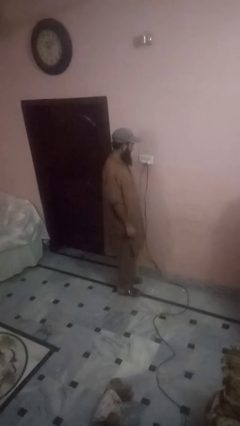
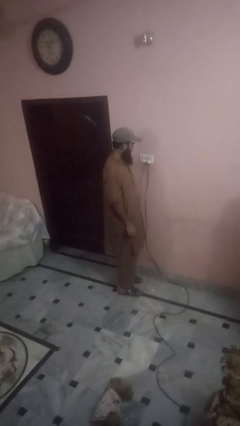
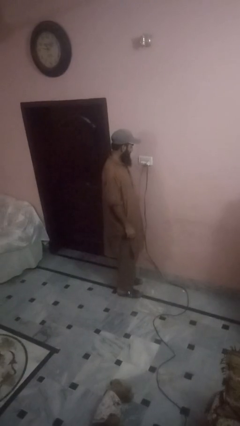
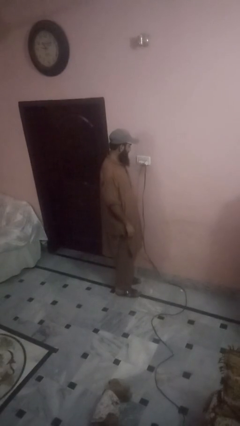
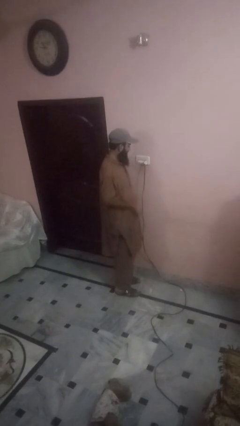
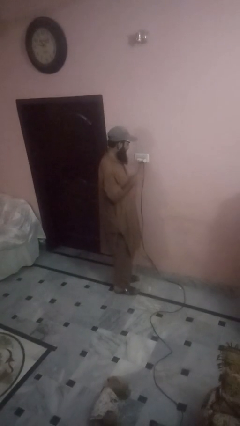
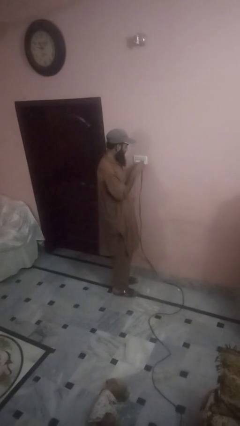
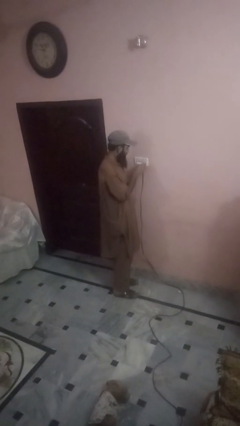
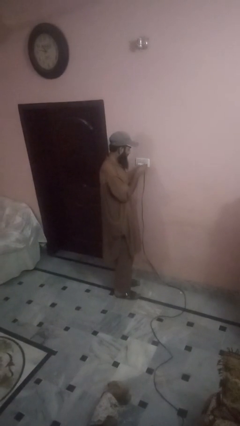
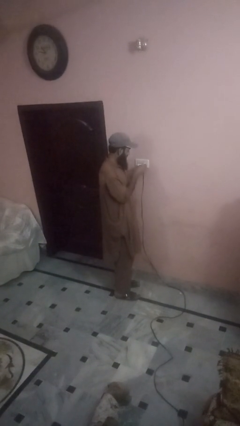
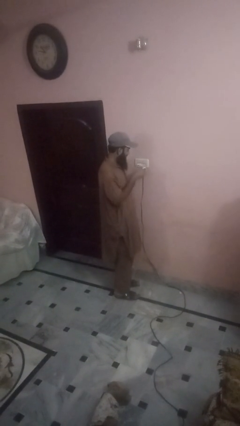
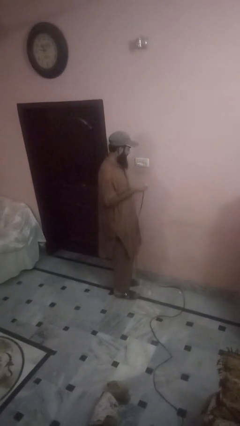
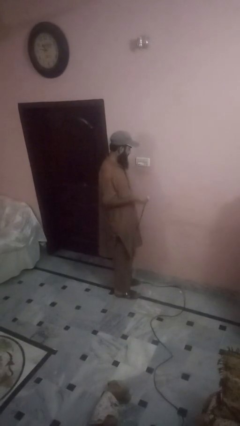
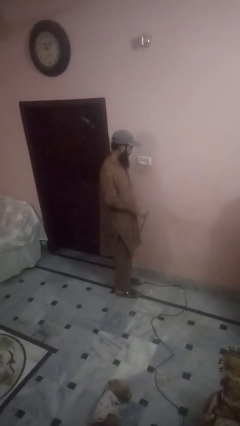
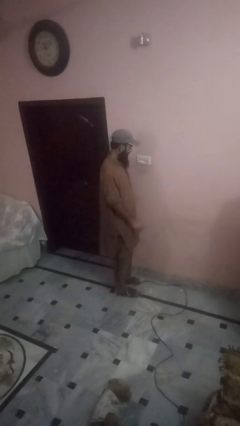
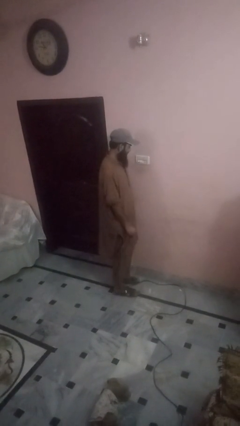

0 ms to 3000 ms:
person unplugs from electrical socket

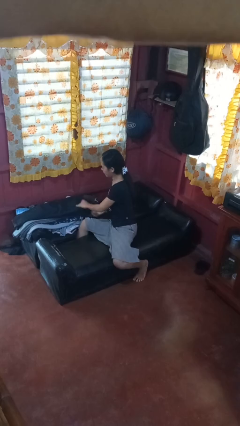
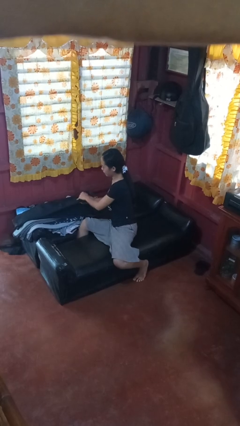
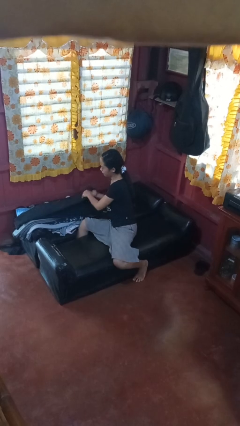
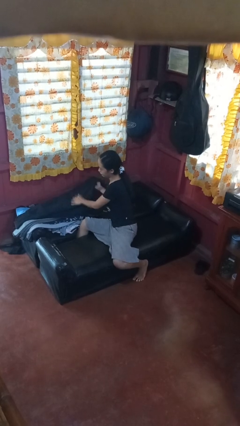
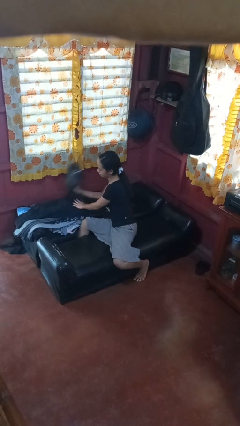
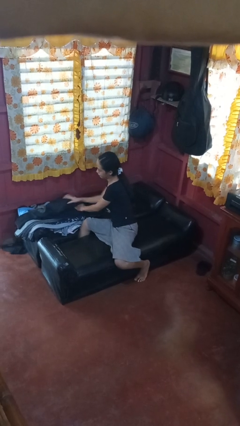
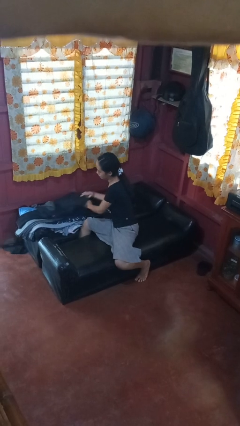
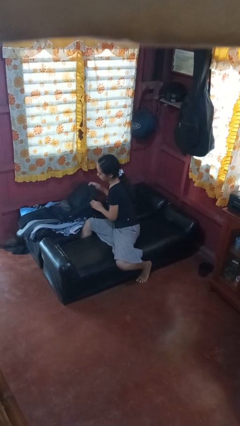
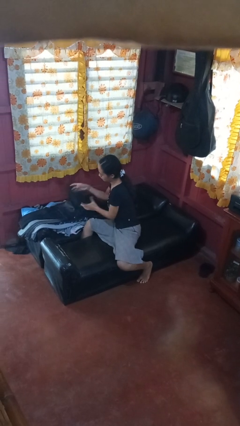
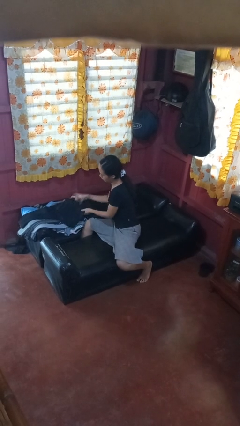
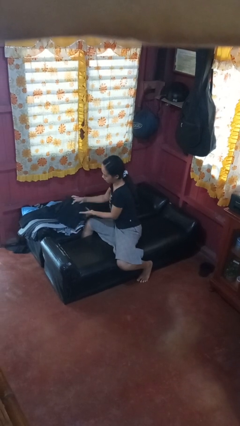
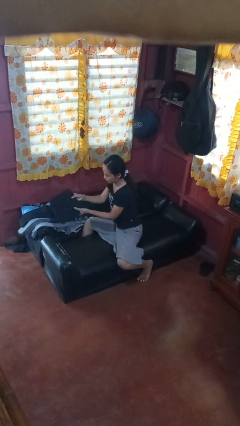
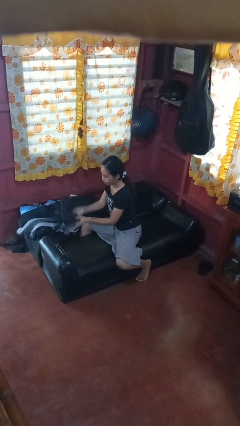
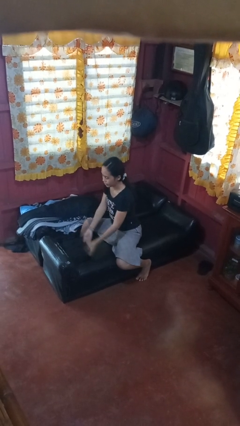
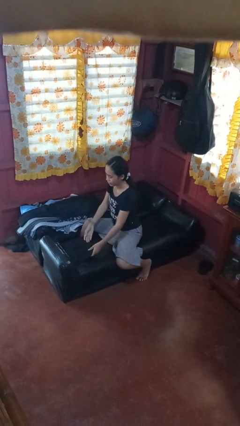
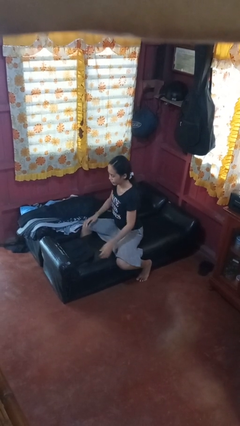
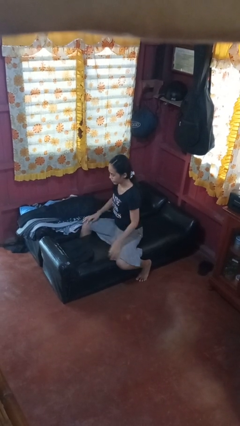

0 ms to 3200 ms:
person folds pants

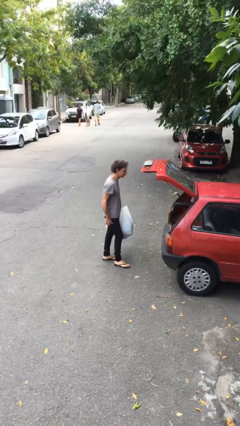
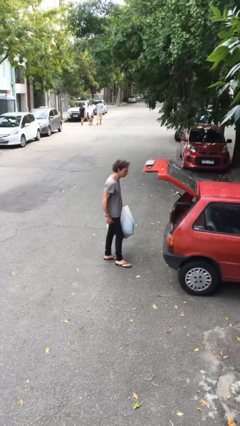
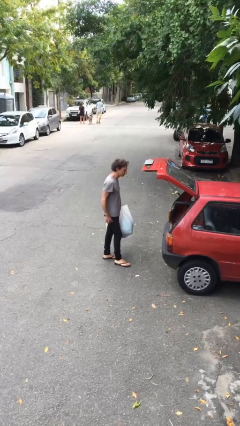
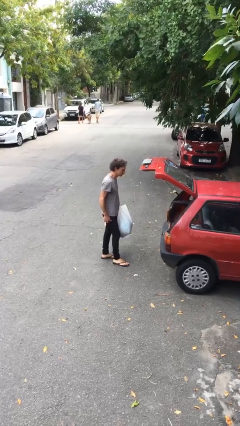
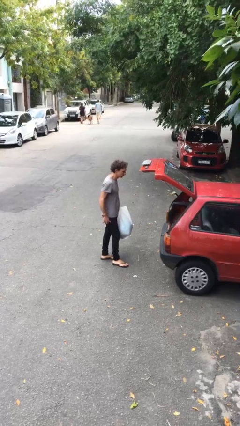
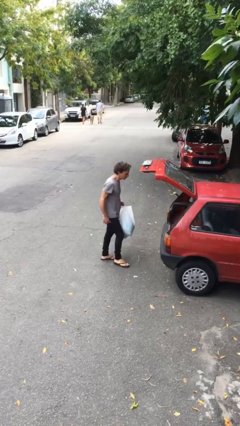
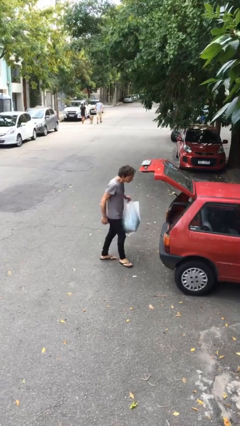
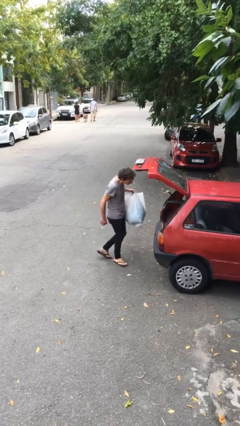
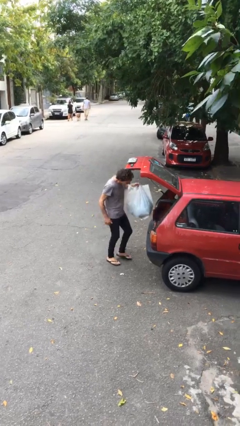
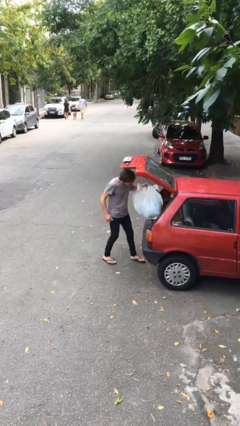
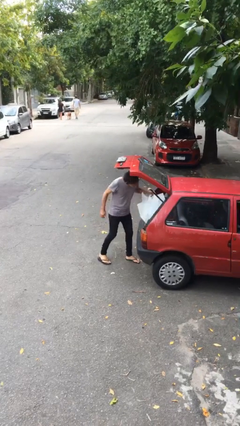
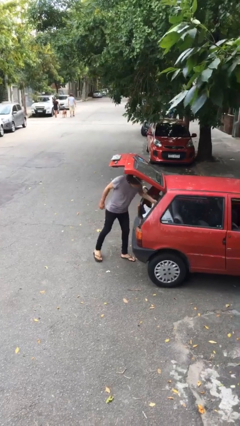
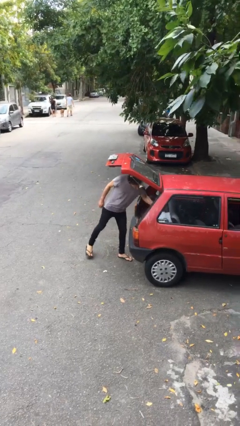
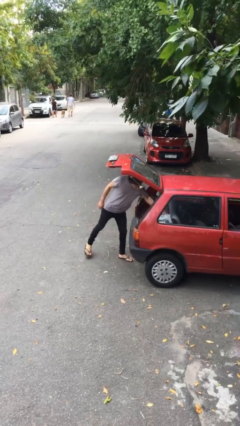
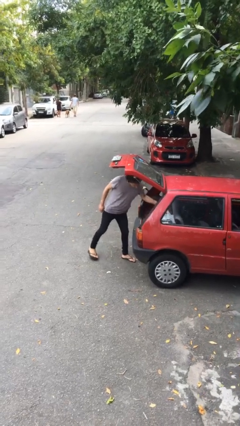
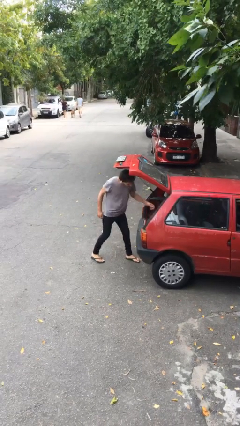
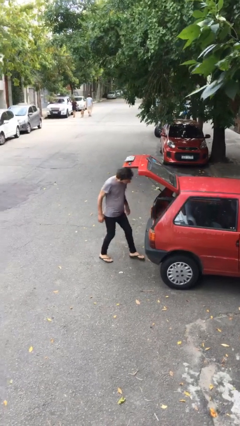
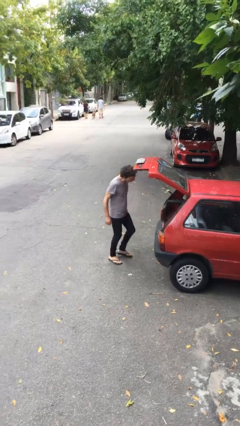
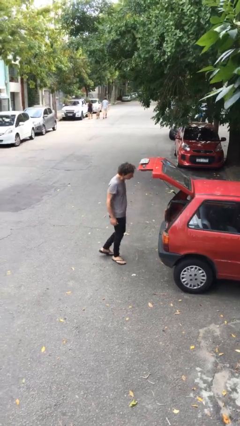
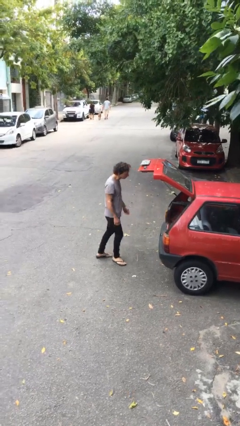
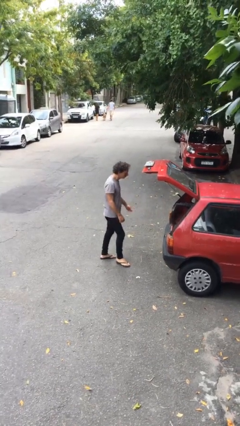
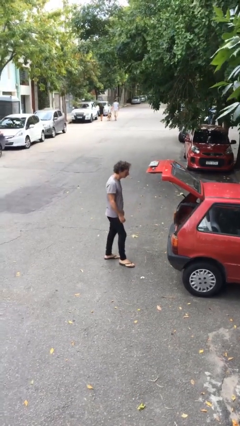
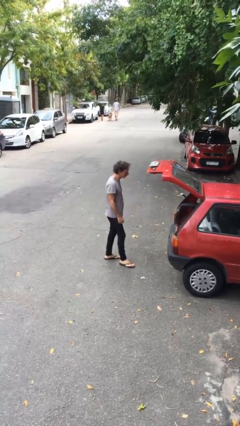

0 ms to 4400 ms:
person loads car

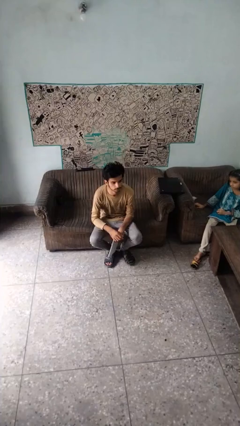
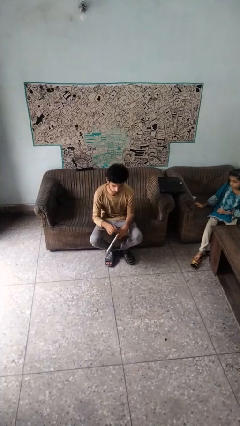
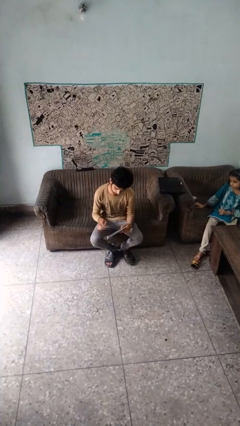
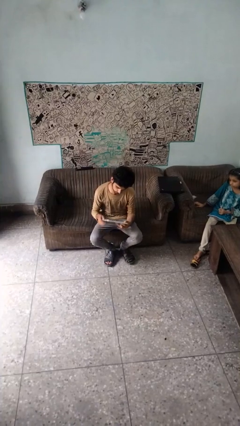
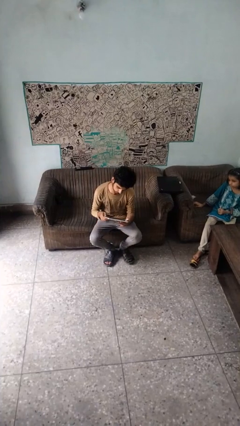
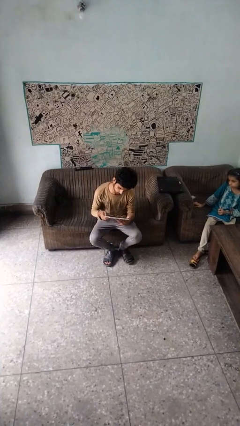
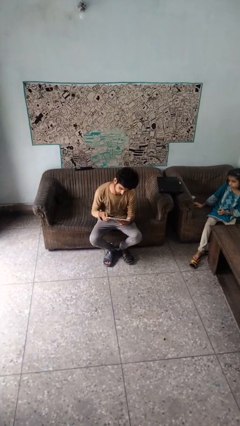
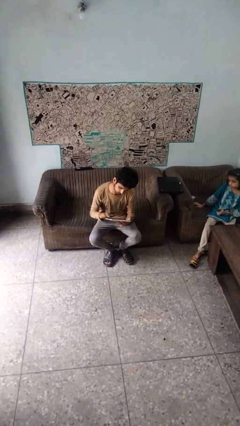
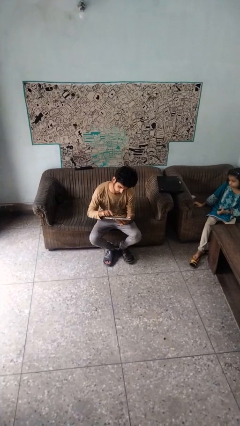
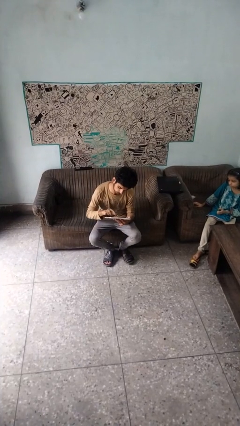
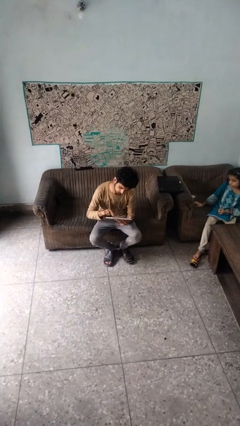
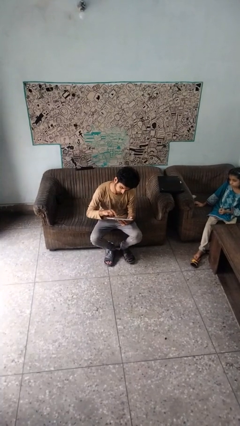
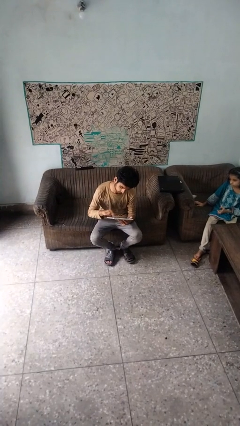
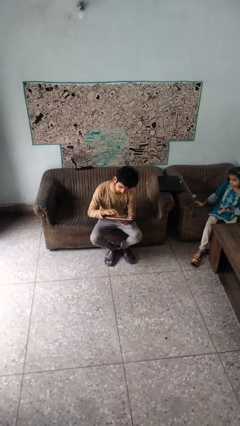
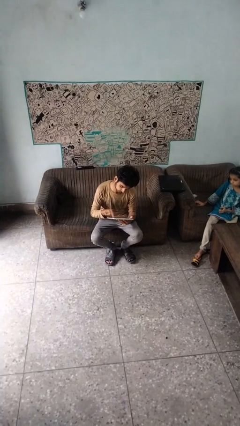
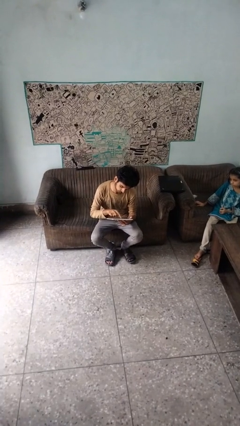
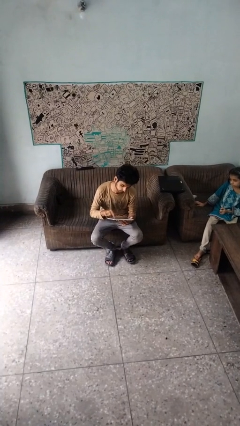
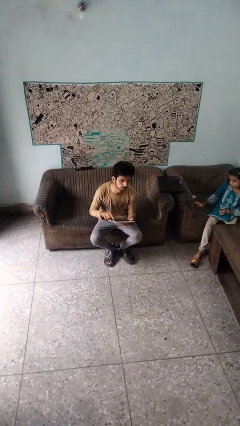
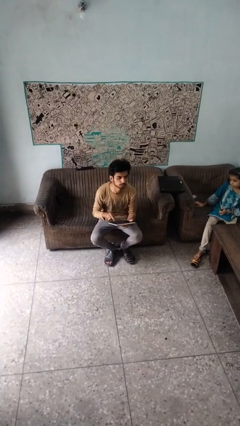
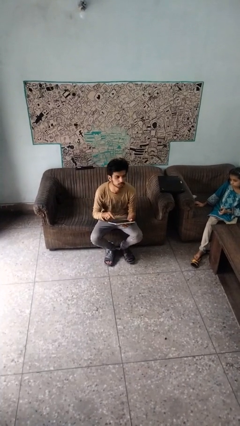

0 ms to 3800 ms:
person interacts with tablet

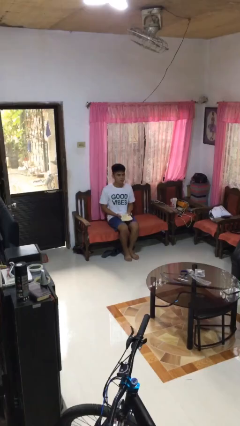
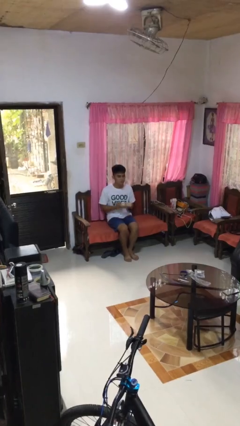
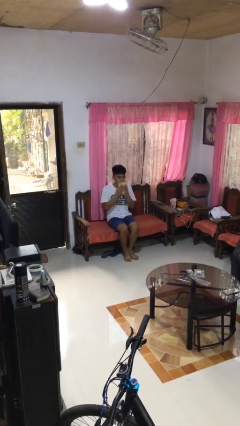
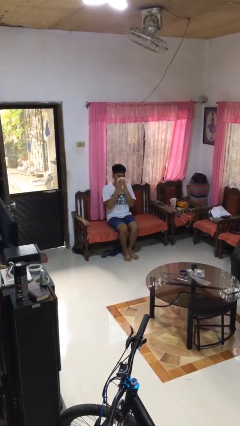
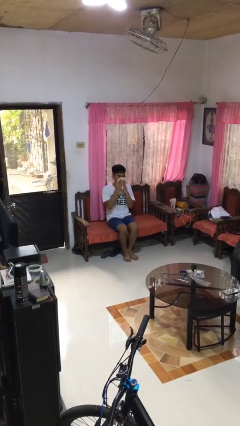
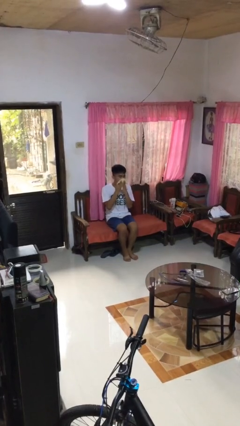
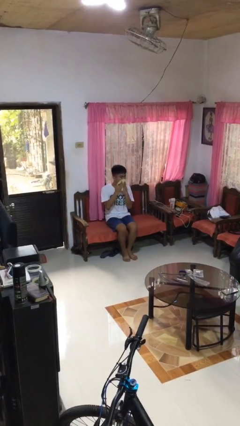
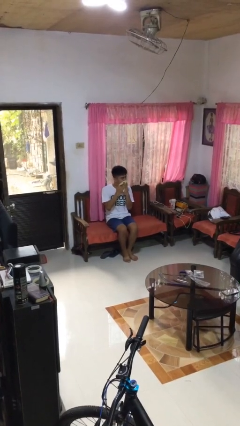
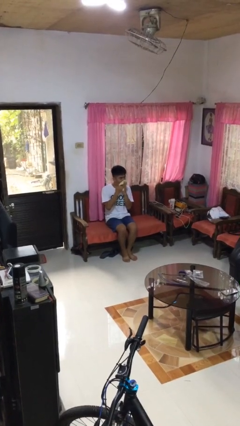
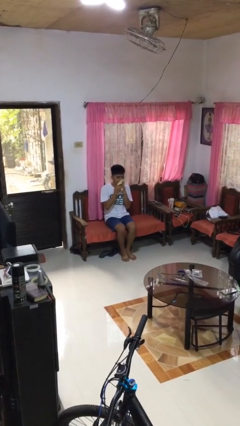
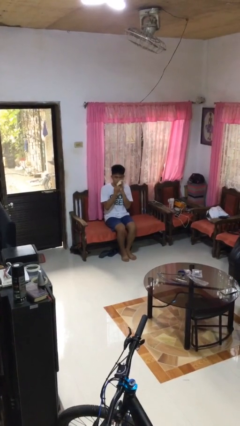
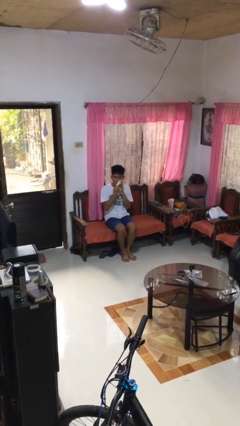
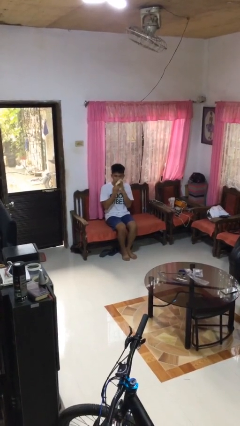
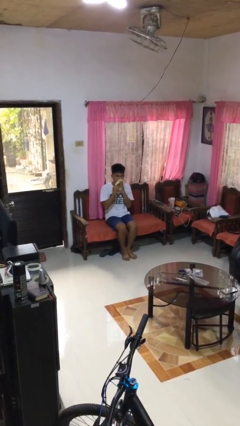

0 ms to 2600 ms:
person wipes mouth with napkin

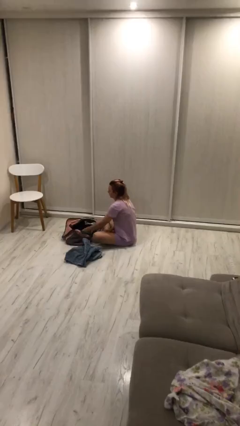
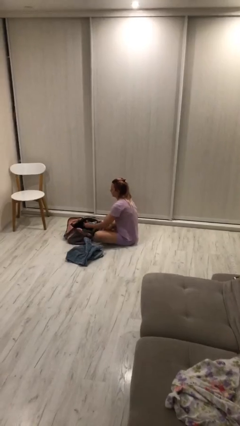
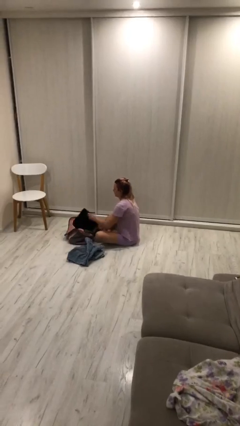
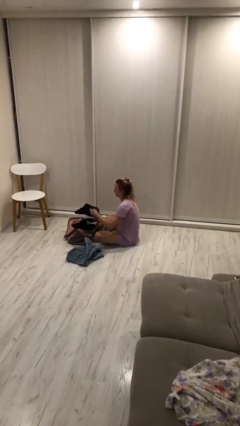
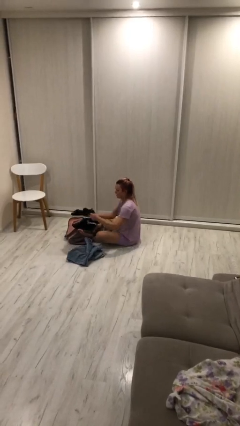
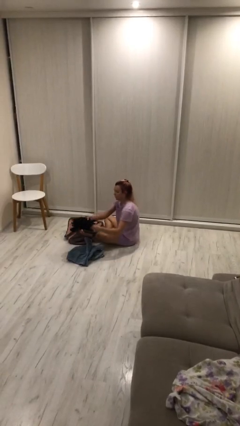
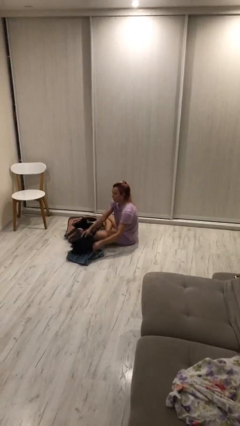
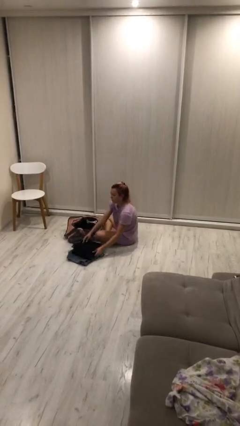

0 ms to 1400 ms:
person unloads clothes from suitcase
